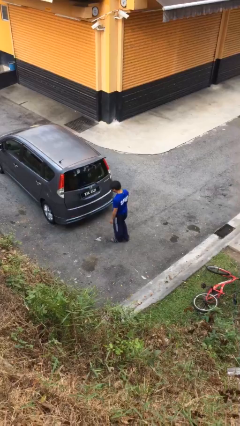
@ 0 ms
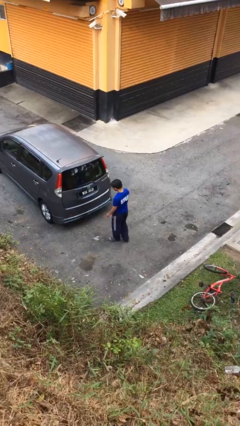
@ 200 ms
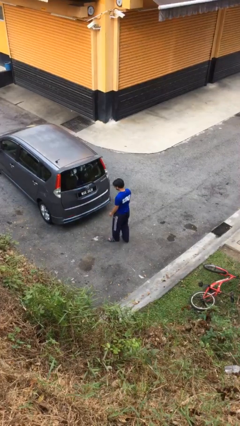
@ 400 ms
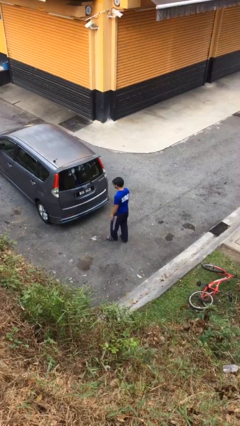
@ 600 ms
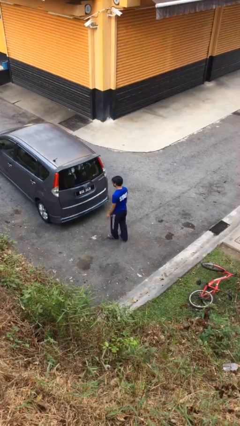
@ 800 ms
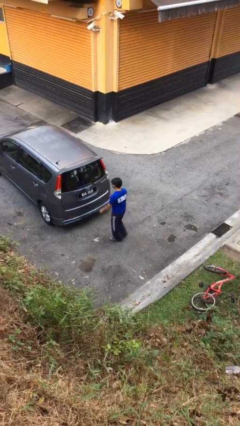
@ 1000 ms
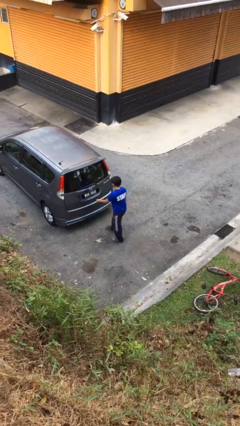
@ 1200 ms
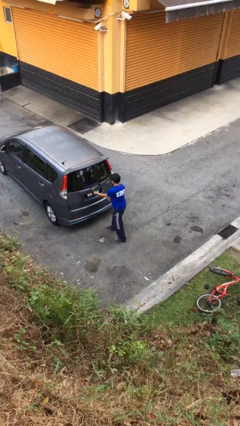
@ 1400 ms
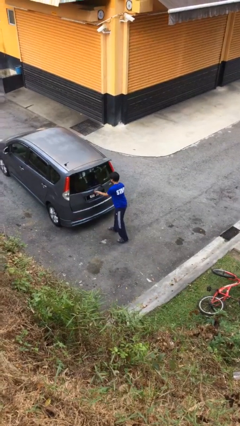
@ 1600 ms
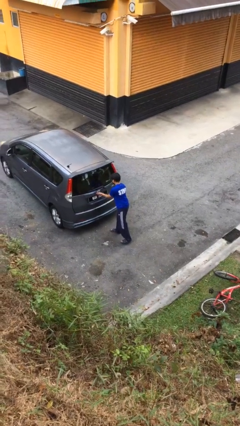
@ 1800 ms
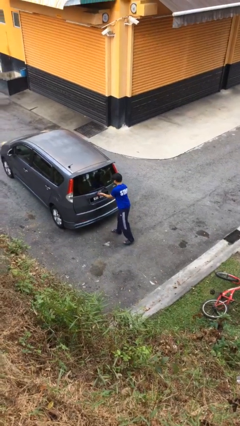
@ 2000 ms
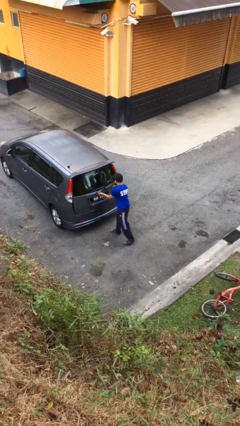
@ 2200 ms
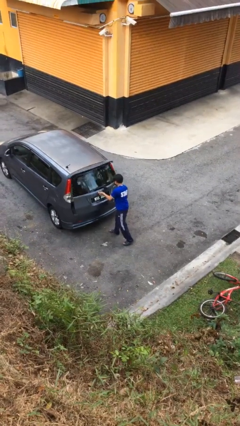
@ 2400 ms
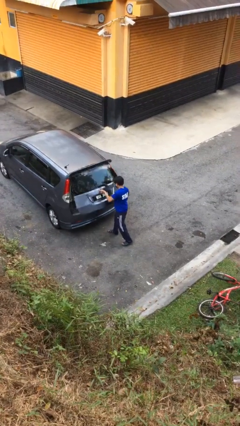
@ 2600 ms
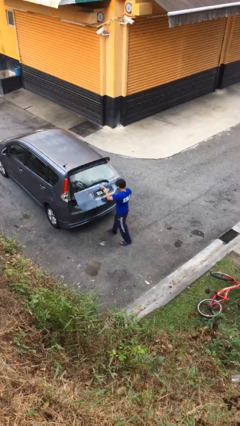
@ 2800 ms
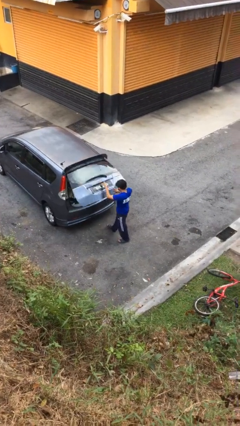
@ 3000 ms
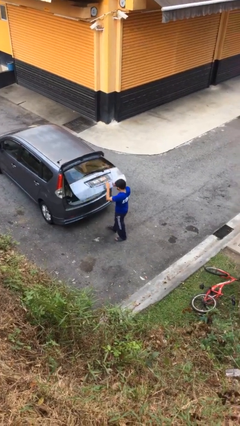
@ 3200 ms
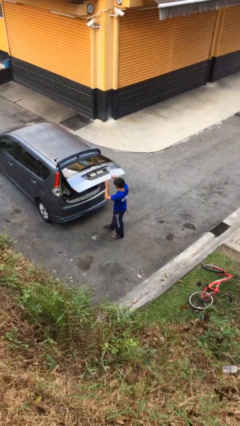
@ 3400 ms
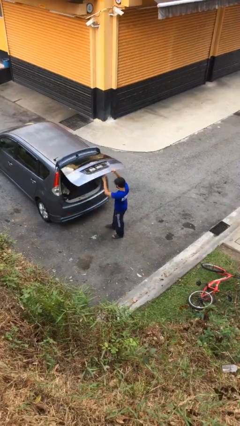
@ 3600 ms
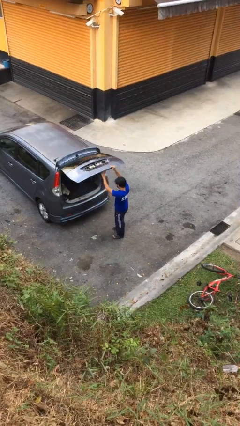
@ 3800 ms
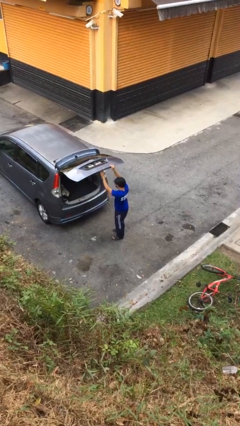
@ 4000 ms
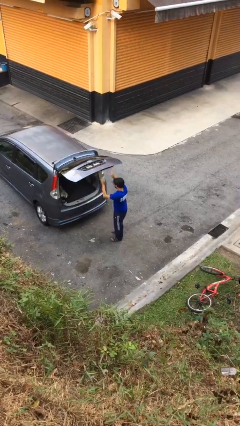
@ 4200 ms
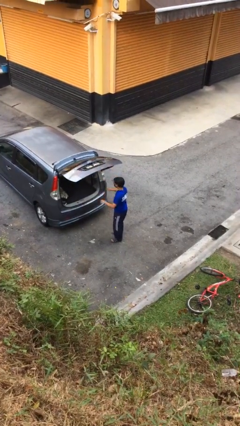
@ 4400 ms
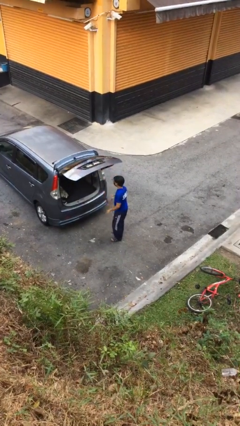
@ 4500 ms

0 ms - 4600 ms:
person opens car trunk

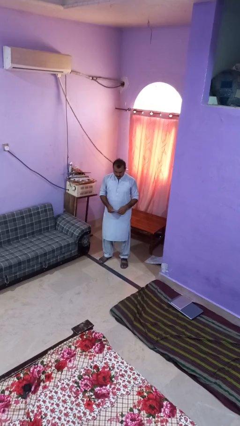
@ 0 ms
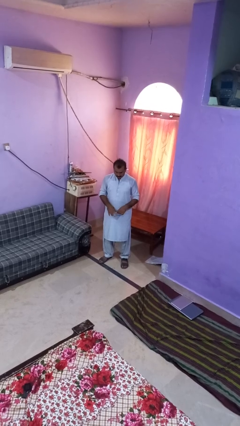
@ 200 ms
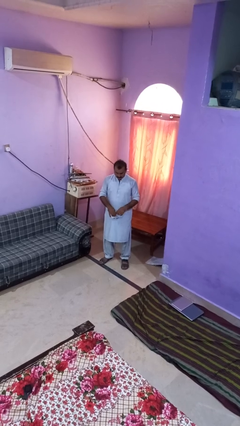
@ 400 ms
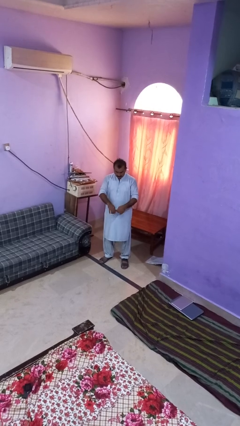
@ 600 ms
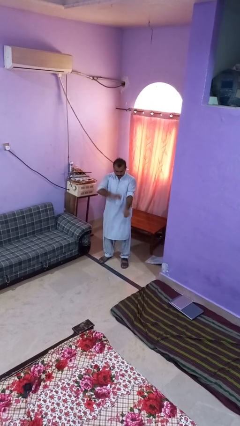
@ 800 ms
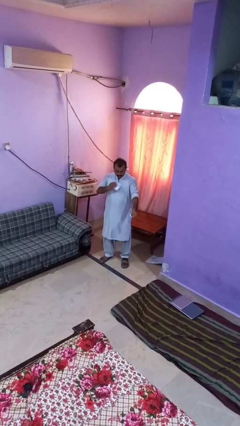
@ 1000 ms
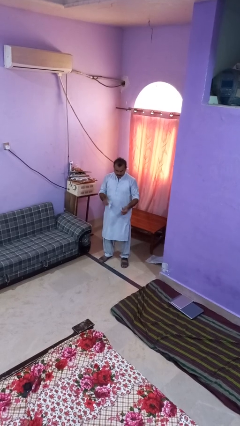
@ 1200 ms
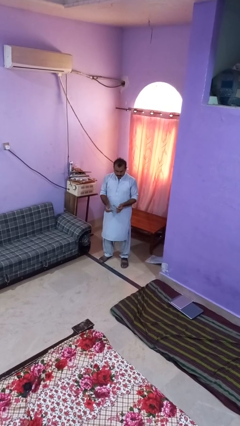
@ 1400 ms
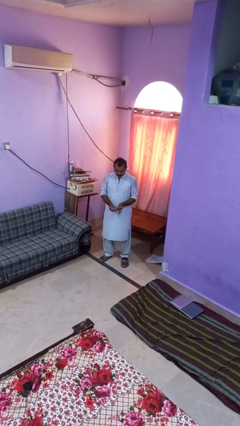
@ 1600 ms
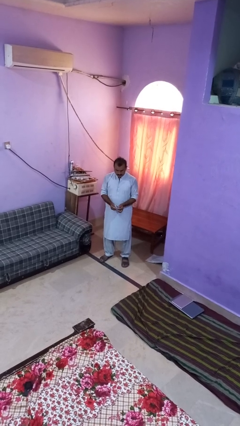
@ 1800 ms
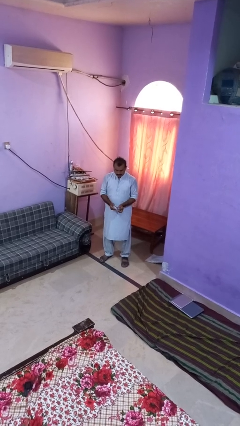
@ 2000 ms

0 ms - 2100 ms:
person tears paper

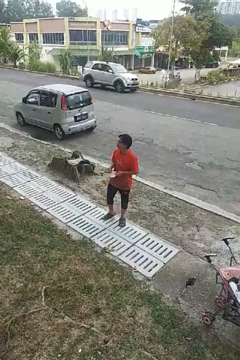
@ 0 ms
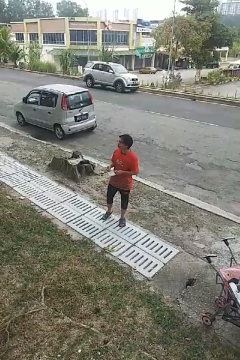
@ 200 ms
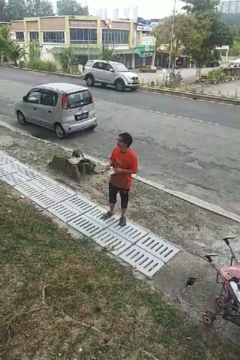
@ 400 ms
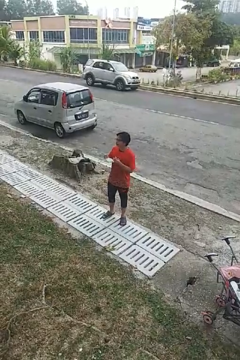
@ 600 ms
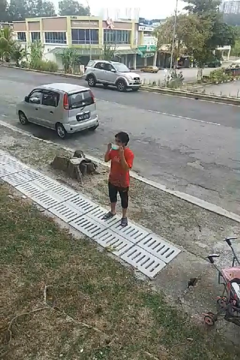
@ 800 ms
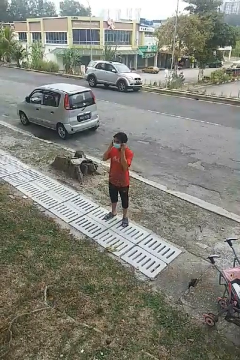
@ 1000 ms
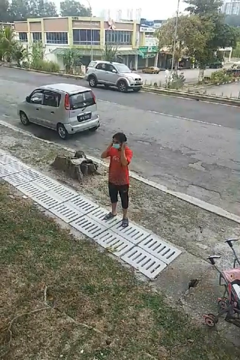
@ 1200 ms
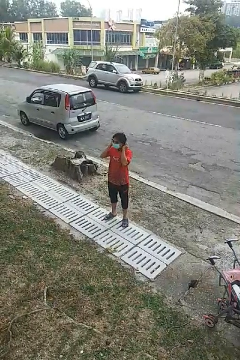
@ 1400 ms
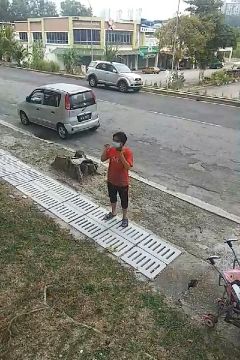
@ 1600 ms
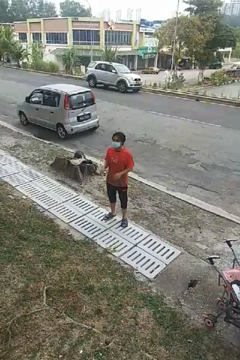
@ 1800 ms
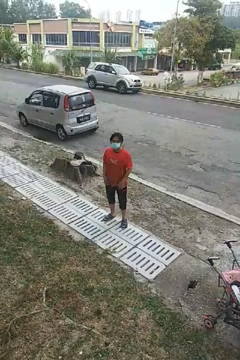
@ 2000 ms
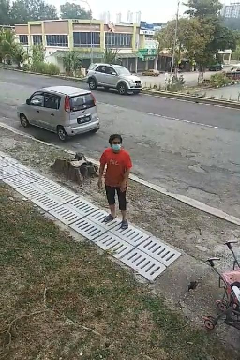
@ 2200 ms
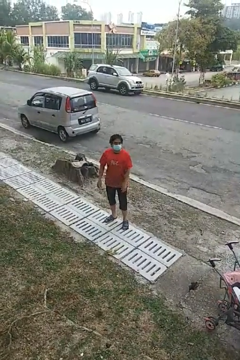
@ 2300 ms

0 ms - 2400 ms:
person puts on facemask

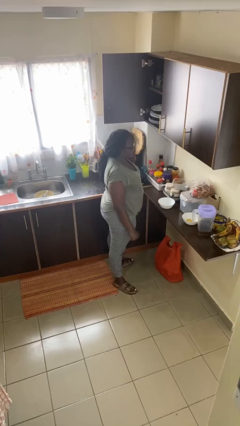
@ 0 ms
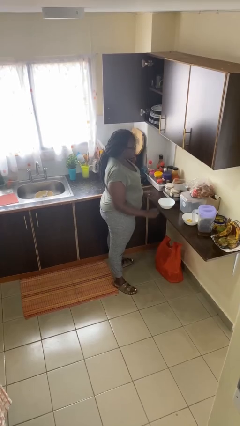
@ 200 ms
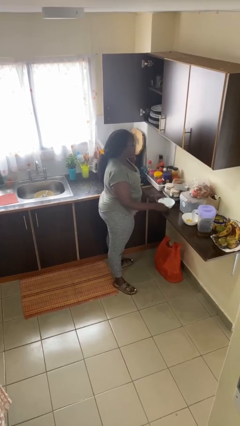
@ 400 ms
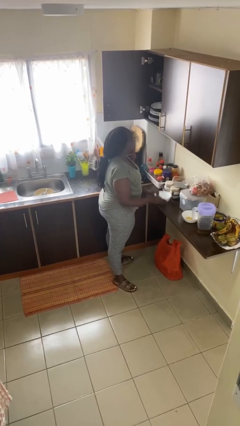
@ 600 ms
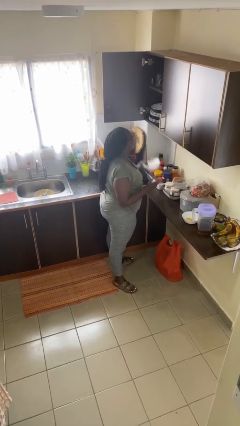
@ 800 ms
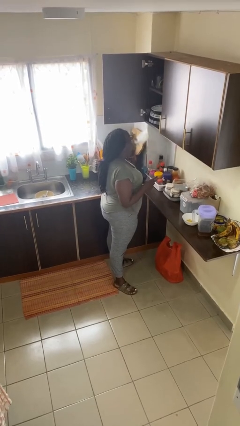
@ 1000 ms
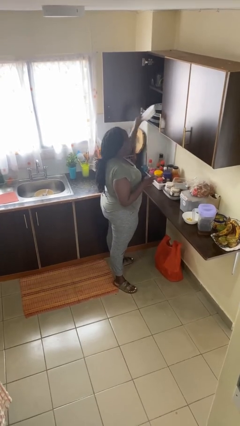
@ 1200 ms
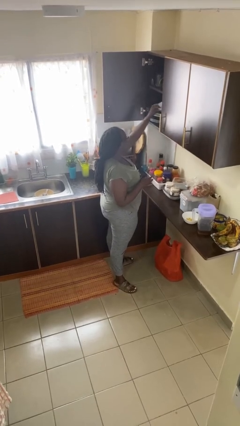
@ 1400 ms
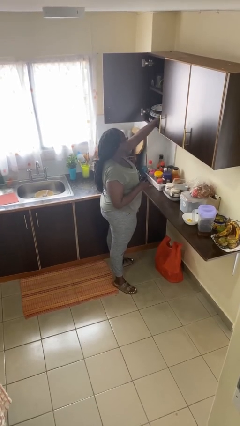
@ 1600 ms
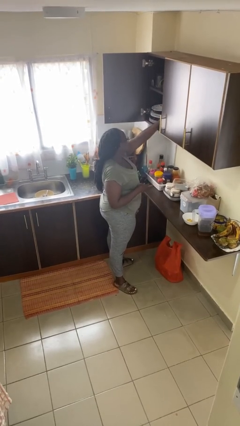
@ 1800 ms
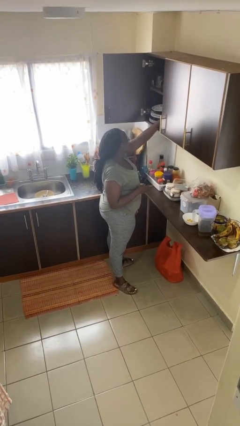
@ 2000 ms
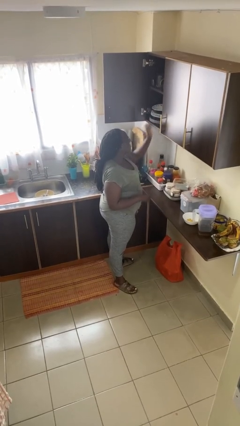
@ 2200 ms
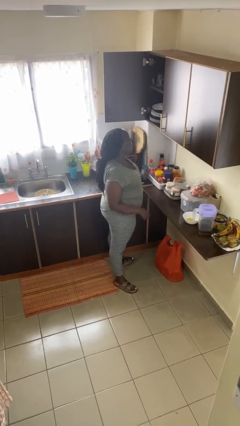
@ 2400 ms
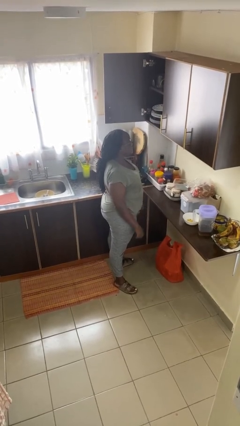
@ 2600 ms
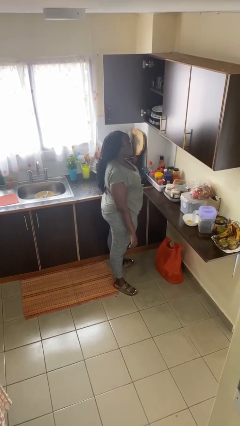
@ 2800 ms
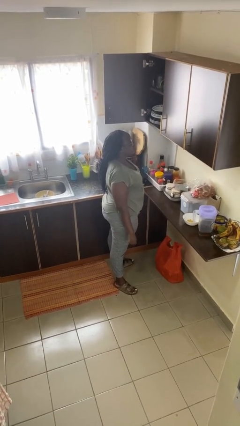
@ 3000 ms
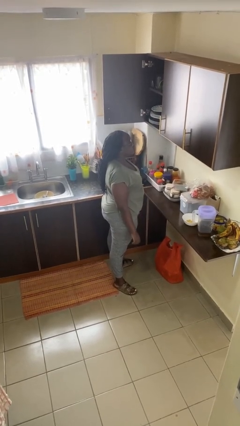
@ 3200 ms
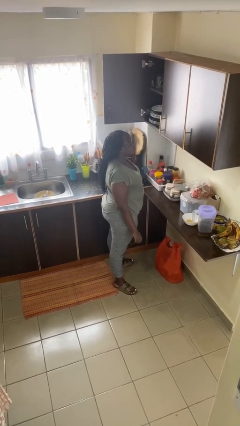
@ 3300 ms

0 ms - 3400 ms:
person puts object in cabinet

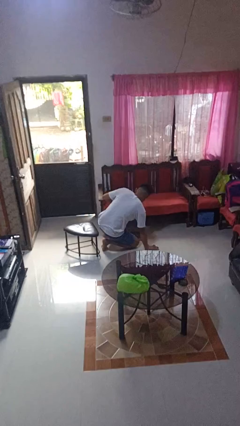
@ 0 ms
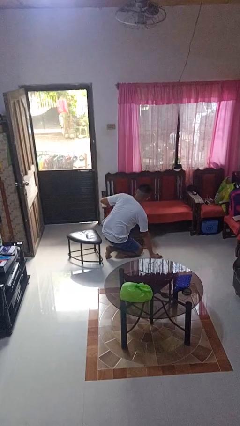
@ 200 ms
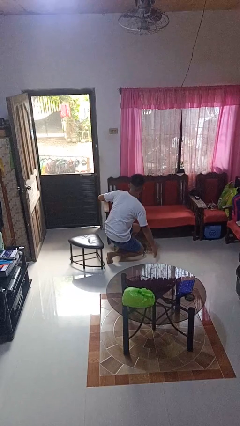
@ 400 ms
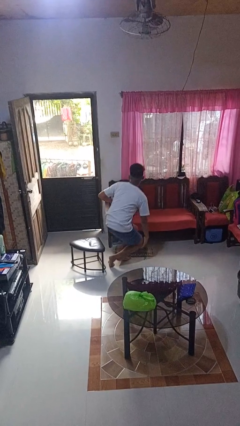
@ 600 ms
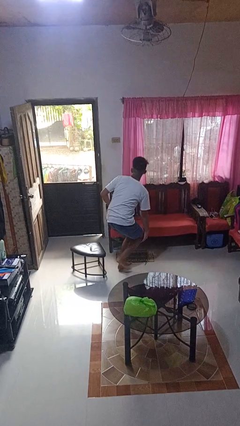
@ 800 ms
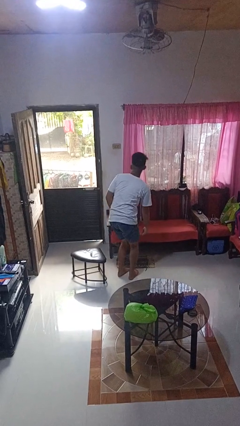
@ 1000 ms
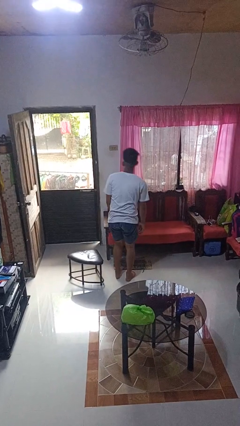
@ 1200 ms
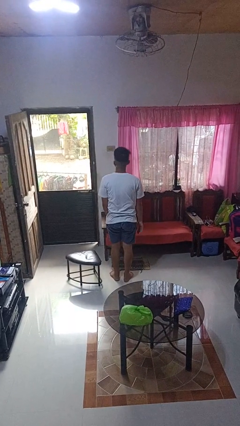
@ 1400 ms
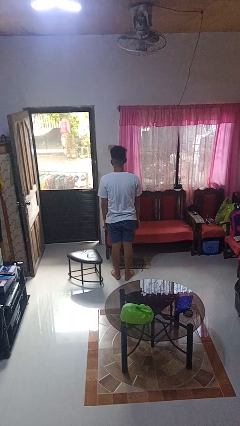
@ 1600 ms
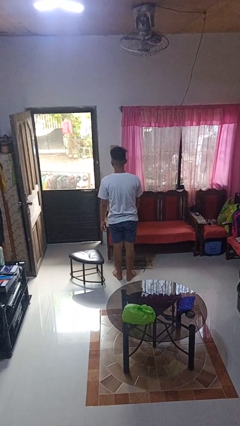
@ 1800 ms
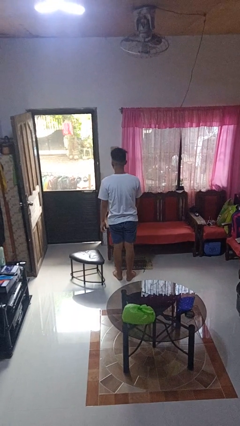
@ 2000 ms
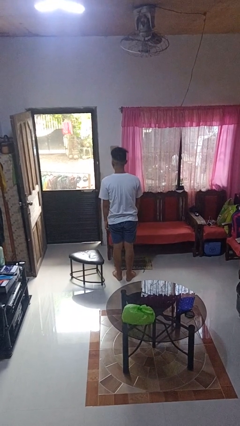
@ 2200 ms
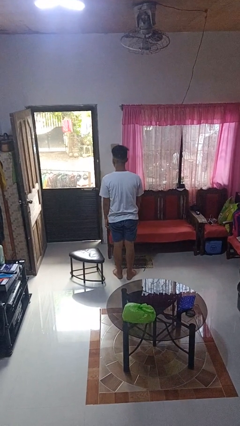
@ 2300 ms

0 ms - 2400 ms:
person stands up from floor

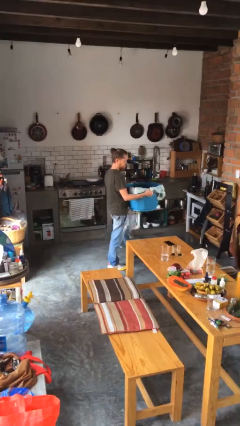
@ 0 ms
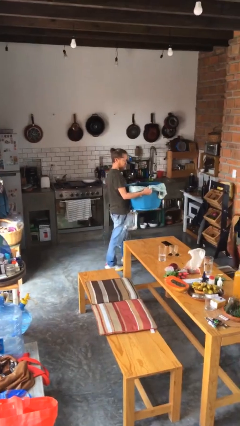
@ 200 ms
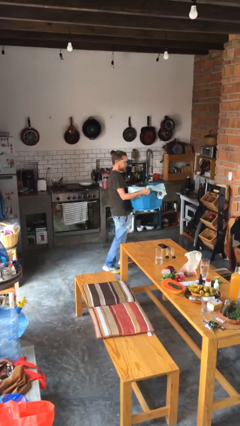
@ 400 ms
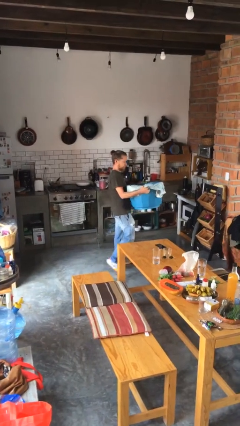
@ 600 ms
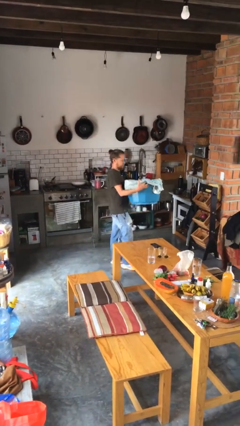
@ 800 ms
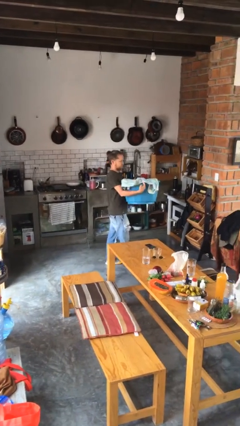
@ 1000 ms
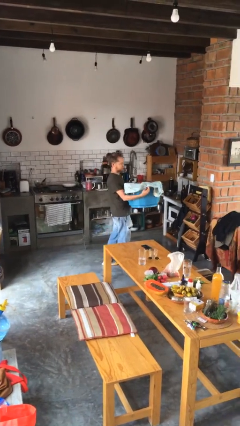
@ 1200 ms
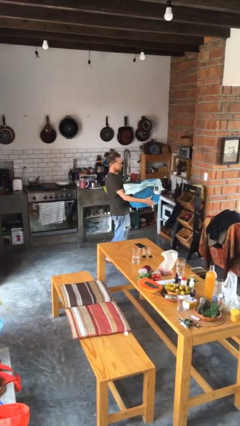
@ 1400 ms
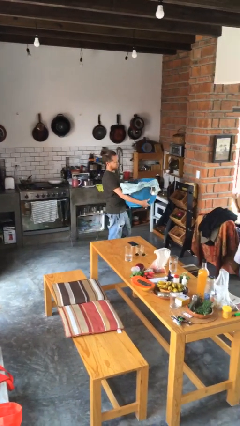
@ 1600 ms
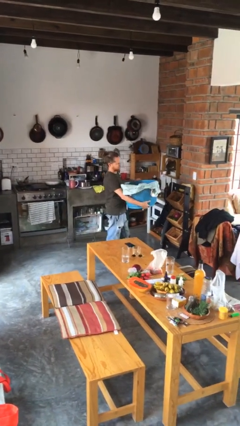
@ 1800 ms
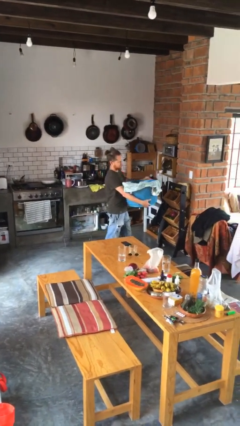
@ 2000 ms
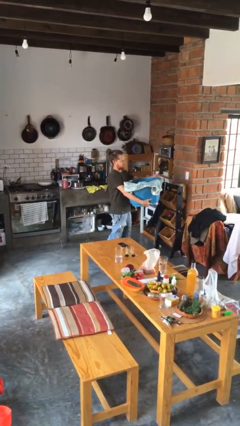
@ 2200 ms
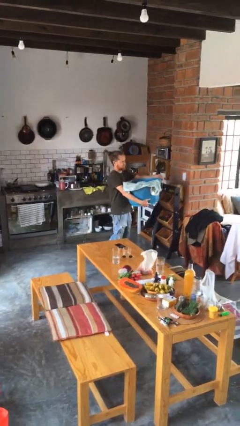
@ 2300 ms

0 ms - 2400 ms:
person carries laundry basket

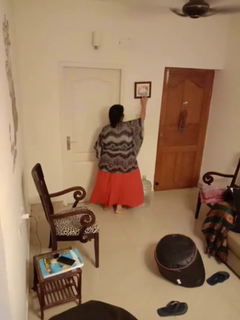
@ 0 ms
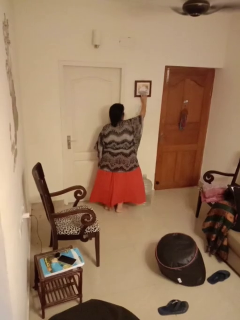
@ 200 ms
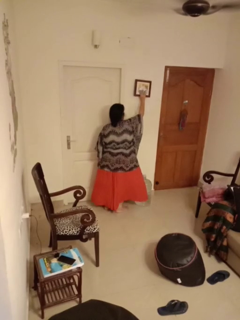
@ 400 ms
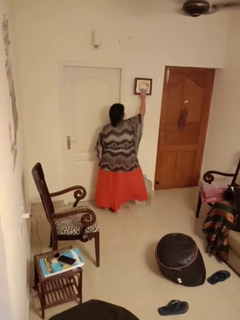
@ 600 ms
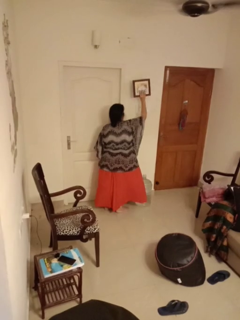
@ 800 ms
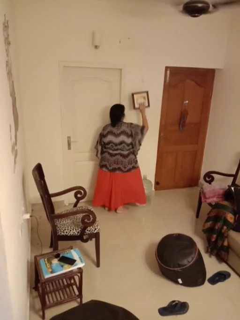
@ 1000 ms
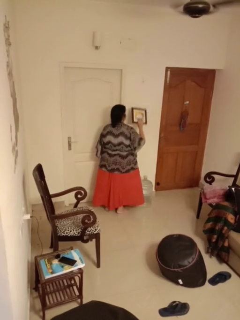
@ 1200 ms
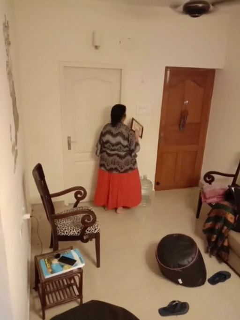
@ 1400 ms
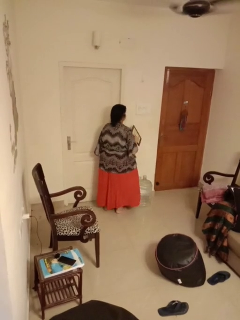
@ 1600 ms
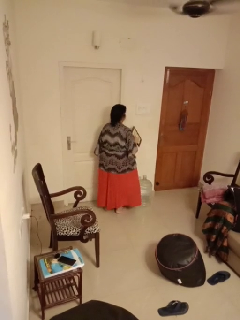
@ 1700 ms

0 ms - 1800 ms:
person takes down picture frame
